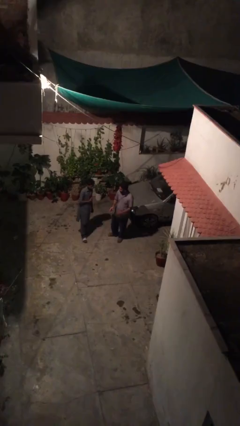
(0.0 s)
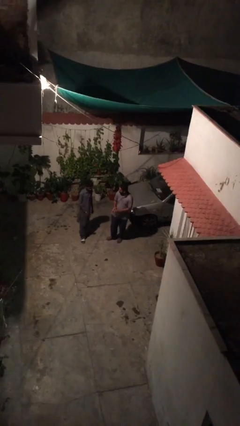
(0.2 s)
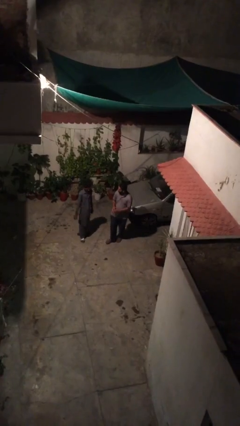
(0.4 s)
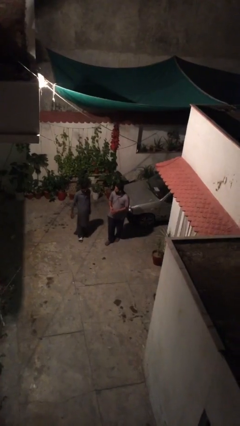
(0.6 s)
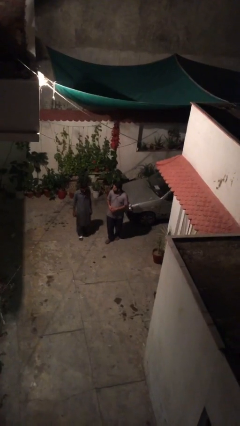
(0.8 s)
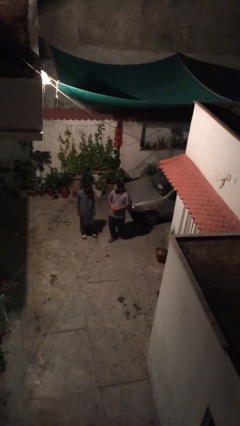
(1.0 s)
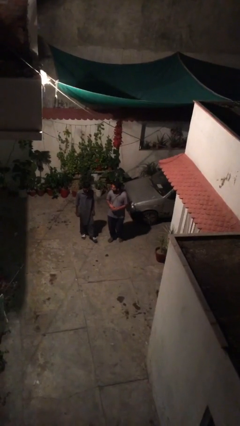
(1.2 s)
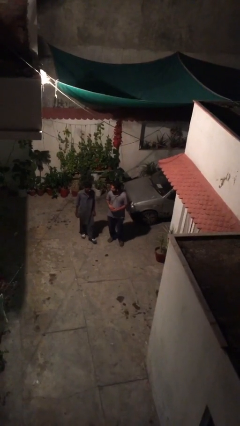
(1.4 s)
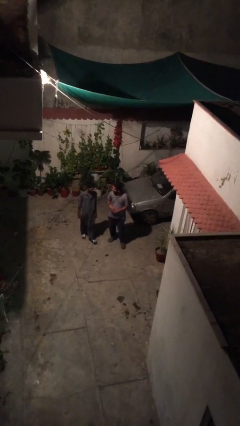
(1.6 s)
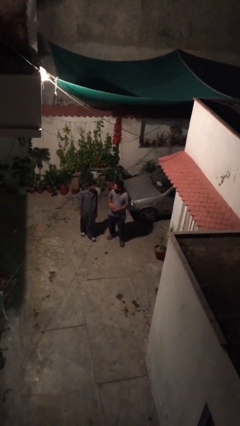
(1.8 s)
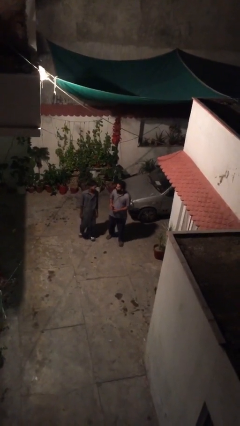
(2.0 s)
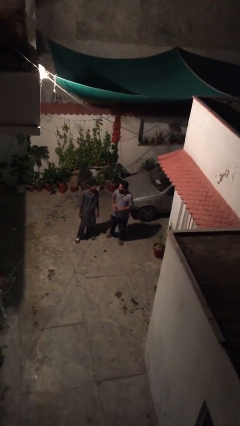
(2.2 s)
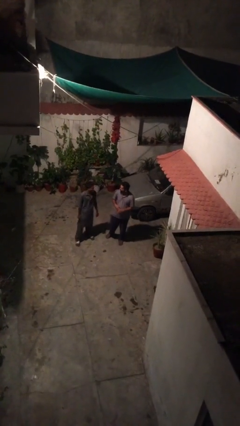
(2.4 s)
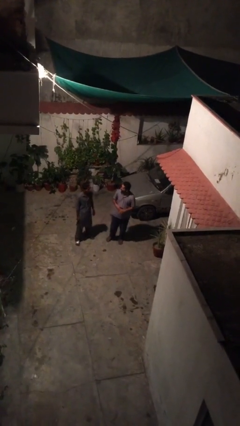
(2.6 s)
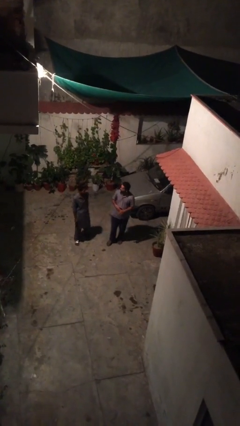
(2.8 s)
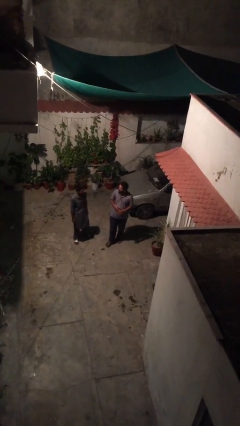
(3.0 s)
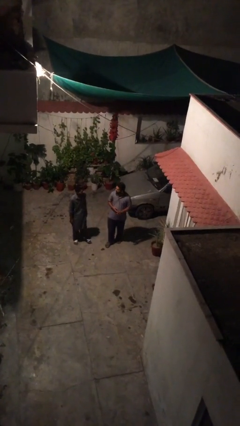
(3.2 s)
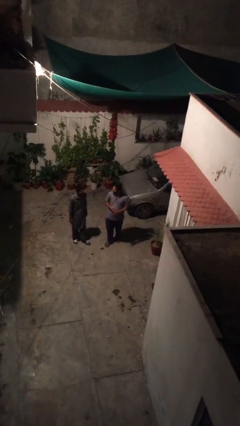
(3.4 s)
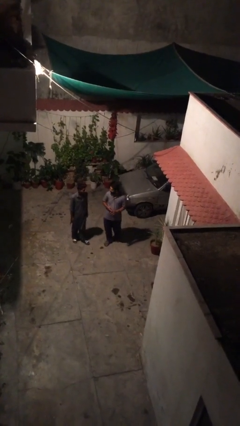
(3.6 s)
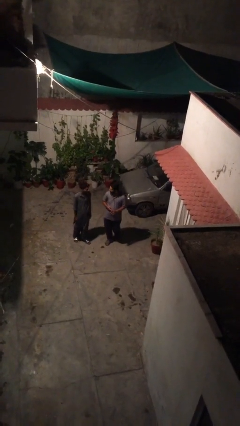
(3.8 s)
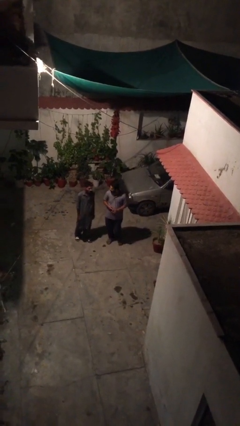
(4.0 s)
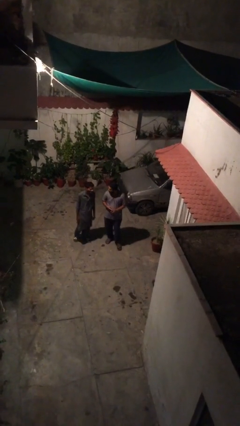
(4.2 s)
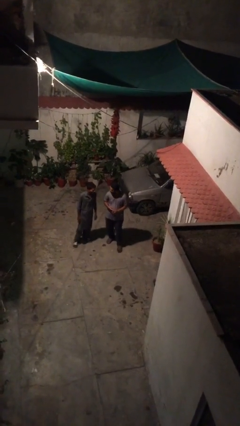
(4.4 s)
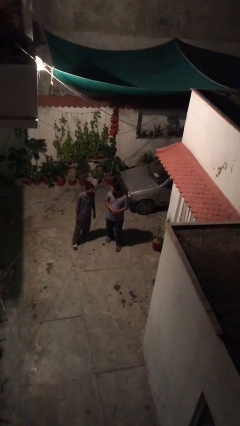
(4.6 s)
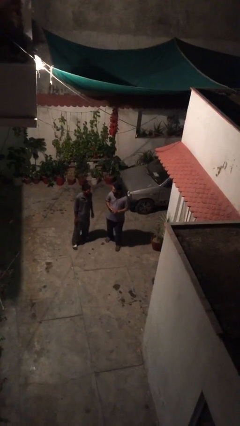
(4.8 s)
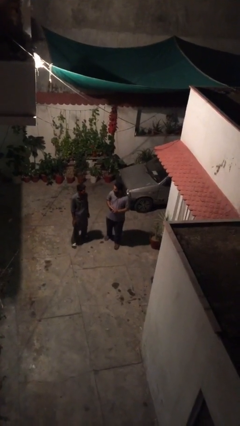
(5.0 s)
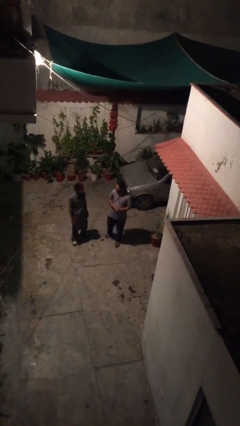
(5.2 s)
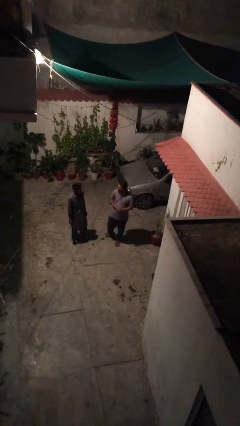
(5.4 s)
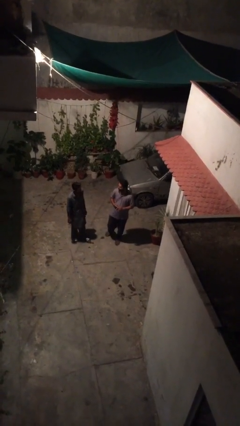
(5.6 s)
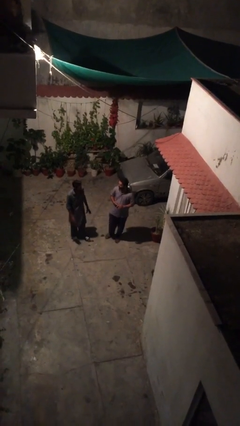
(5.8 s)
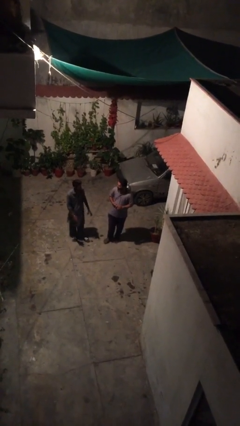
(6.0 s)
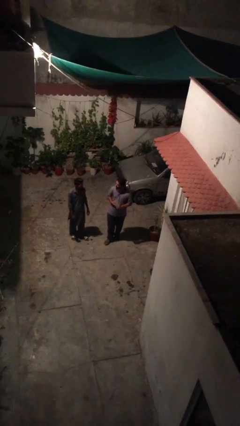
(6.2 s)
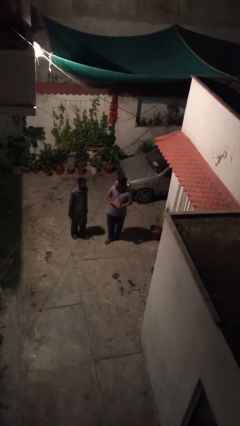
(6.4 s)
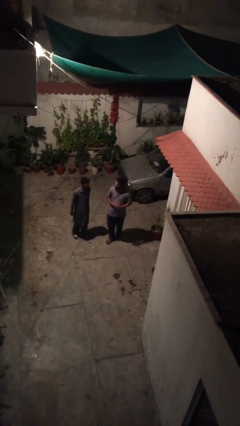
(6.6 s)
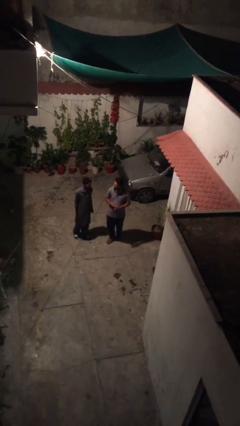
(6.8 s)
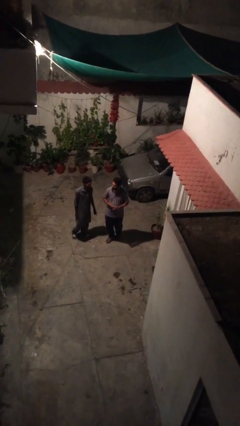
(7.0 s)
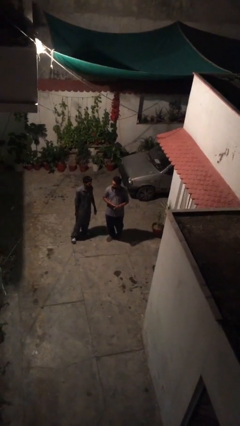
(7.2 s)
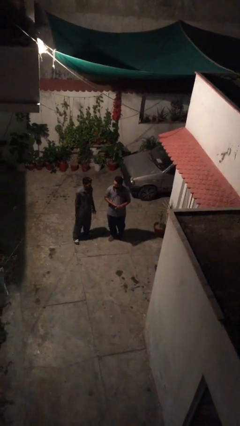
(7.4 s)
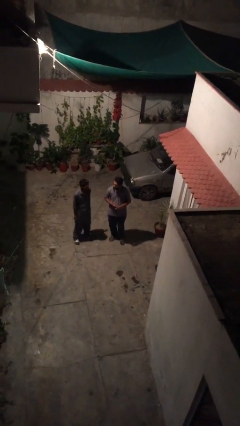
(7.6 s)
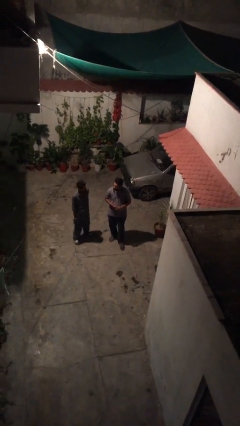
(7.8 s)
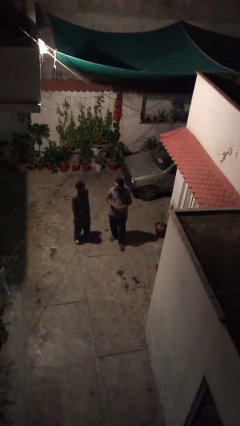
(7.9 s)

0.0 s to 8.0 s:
person talks to person

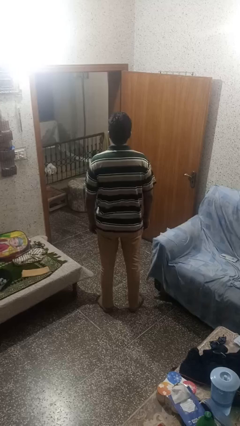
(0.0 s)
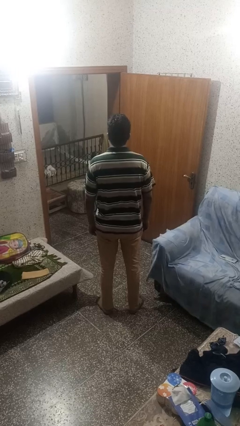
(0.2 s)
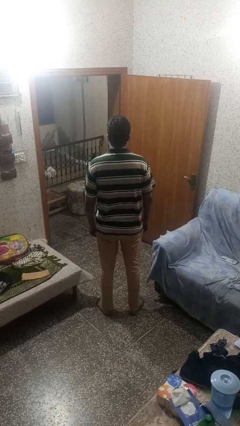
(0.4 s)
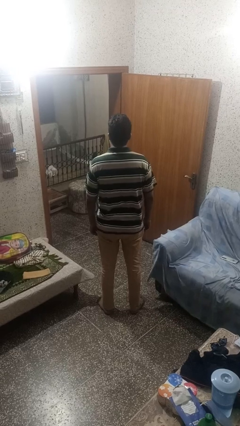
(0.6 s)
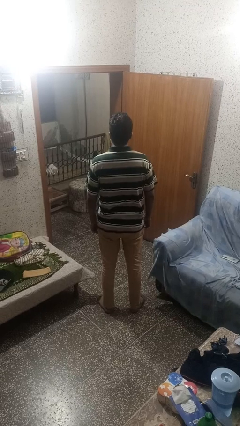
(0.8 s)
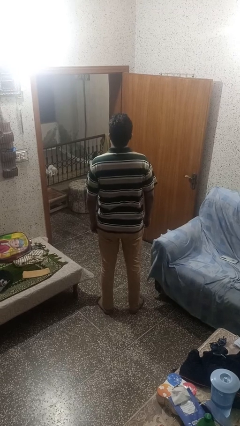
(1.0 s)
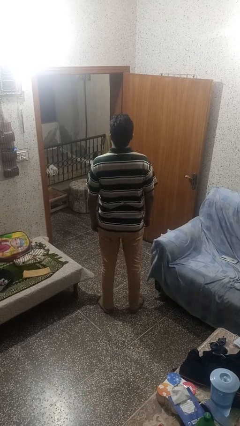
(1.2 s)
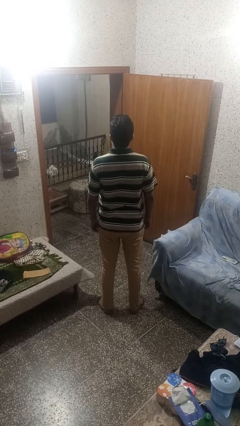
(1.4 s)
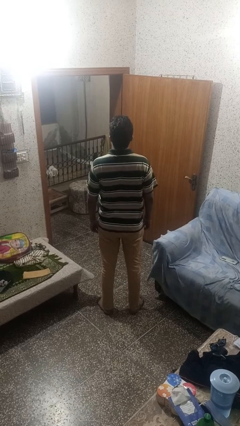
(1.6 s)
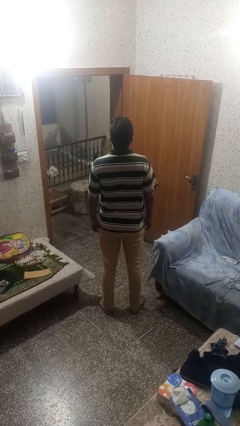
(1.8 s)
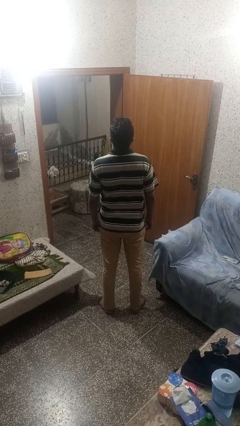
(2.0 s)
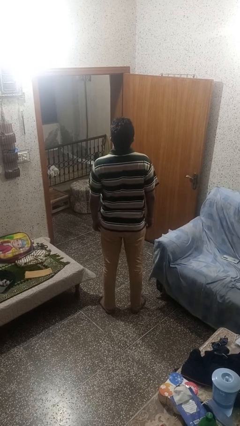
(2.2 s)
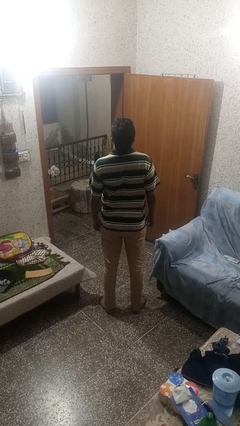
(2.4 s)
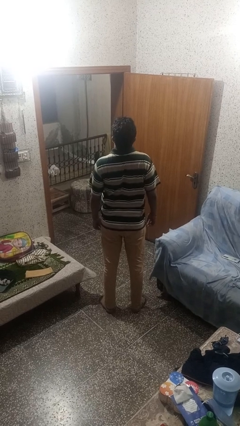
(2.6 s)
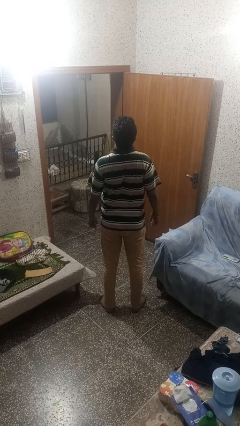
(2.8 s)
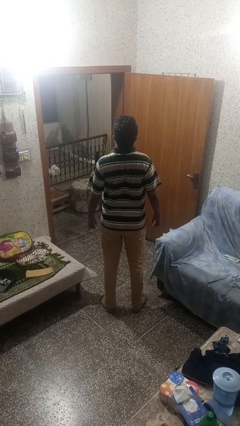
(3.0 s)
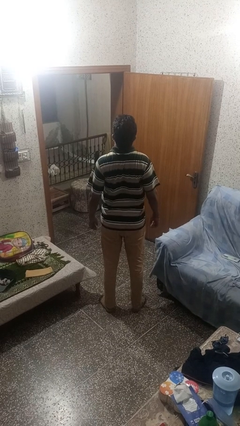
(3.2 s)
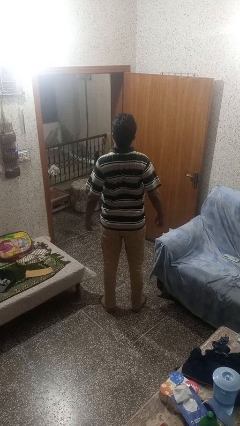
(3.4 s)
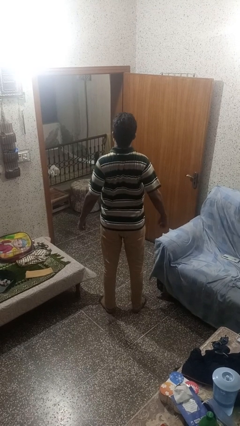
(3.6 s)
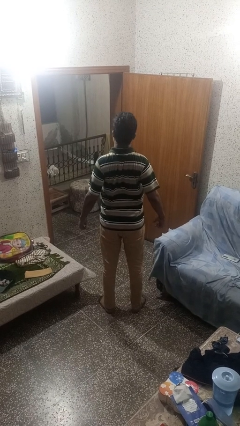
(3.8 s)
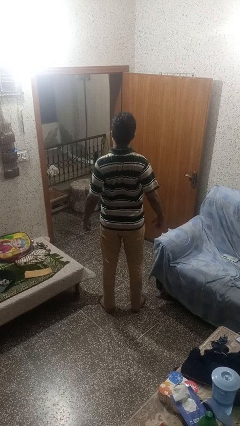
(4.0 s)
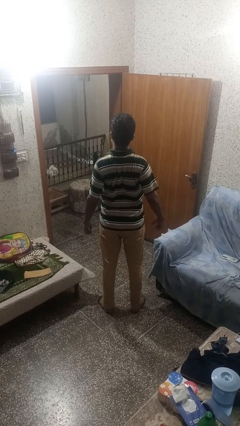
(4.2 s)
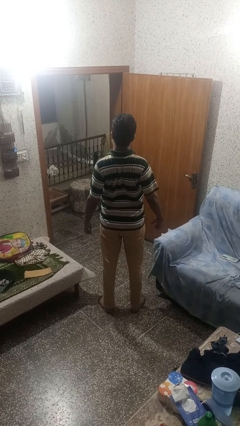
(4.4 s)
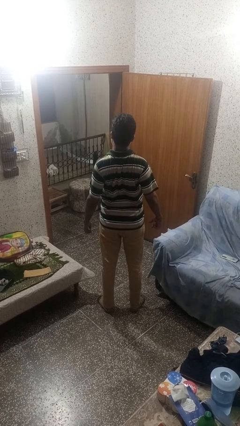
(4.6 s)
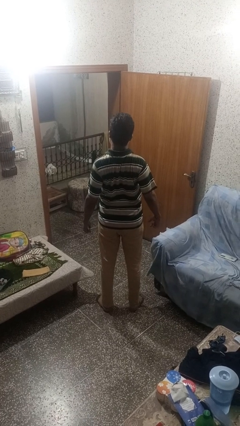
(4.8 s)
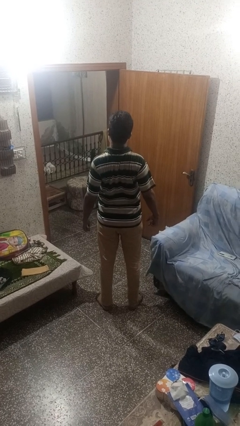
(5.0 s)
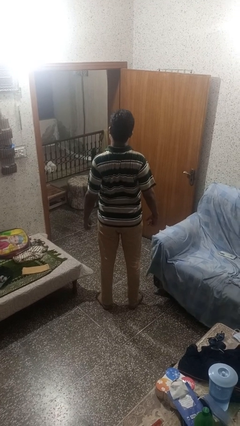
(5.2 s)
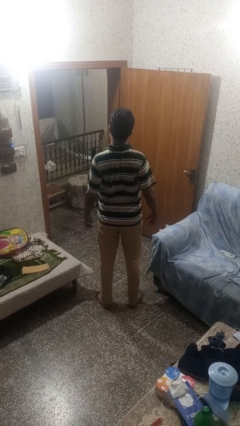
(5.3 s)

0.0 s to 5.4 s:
person stretches back

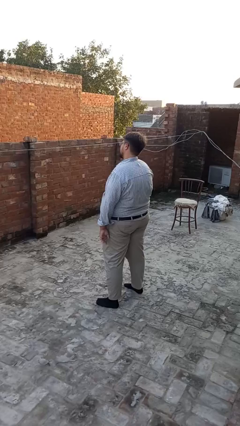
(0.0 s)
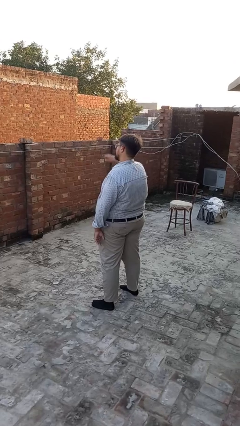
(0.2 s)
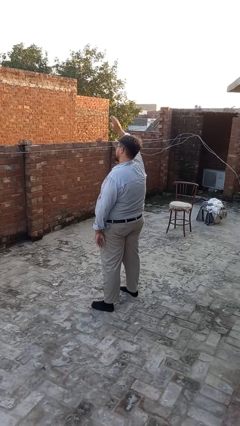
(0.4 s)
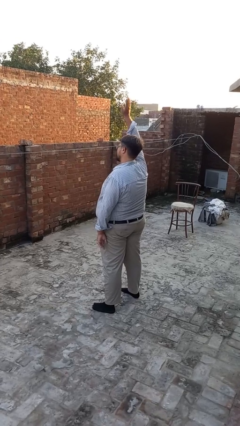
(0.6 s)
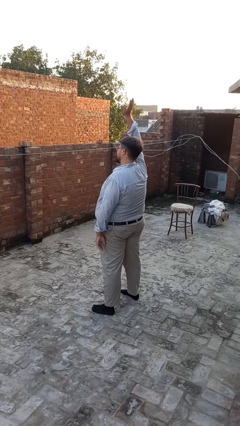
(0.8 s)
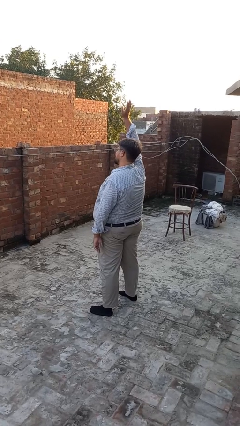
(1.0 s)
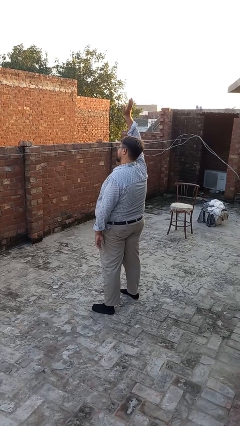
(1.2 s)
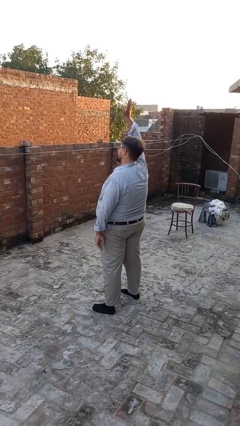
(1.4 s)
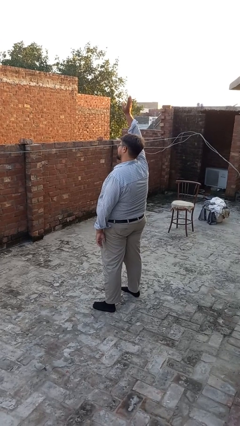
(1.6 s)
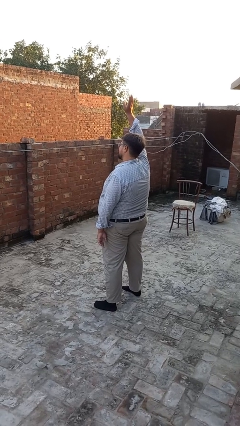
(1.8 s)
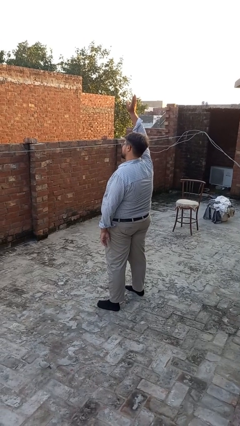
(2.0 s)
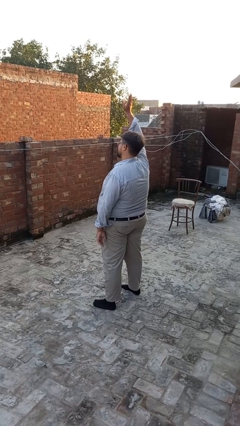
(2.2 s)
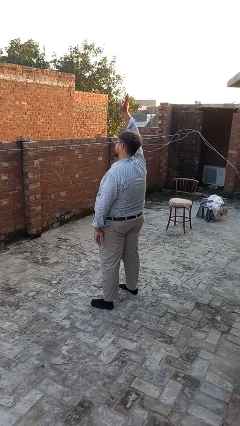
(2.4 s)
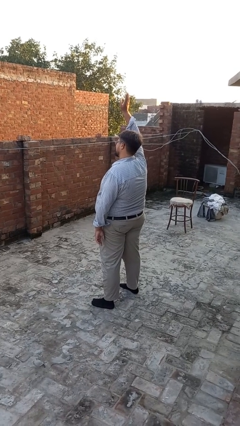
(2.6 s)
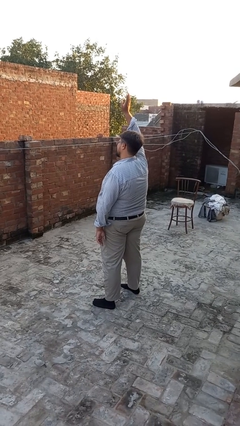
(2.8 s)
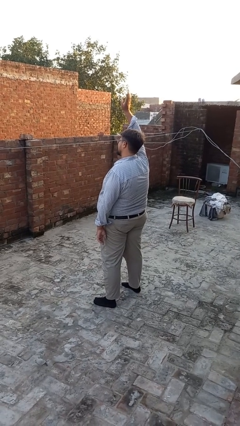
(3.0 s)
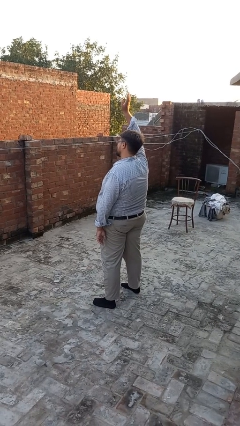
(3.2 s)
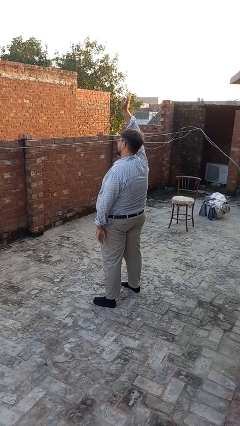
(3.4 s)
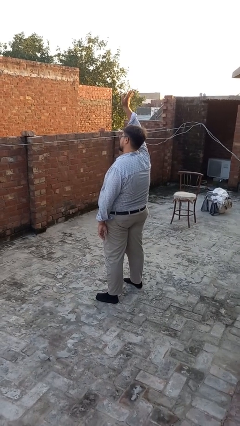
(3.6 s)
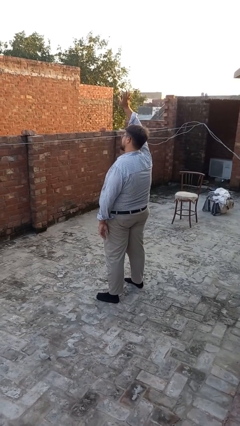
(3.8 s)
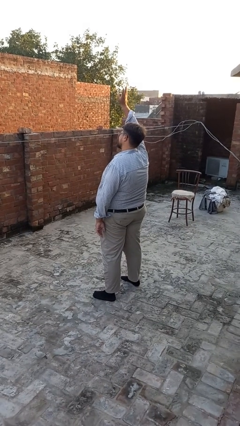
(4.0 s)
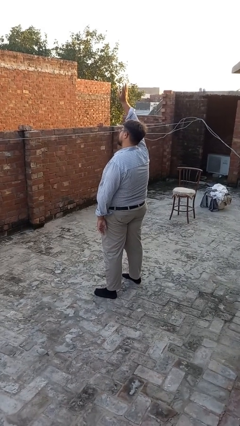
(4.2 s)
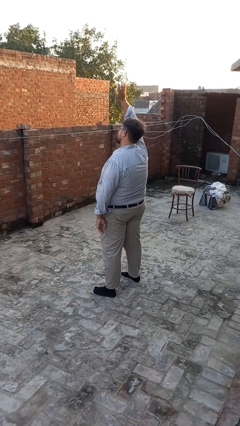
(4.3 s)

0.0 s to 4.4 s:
person gestures raise hand

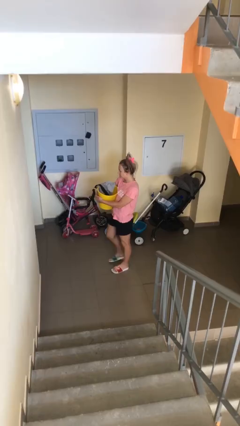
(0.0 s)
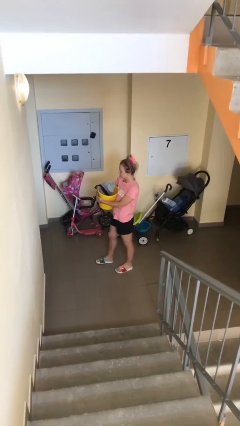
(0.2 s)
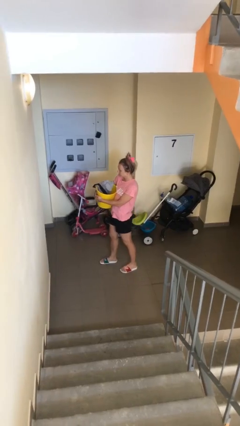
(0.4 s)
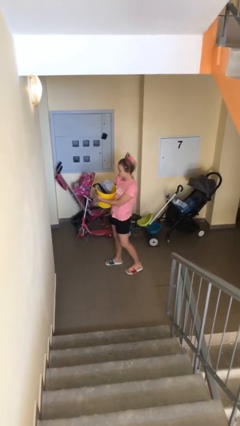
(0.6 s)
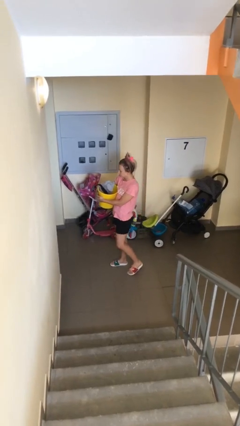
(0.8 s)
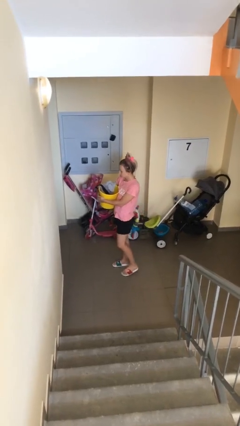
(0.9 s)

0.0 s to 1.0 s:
person carries laundry basket
